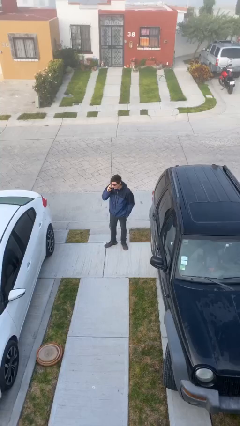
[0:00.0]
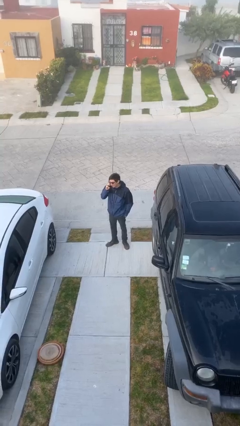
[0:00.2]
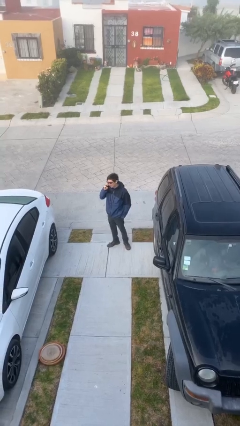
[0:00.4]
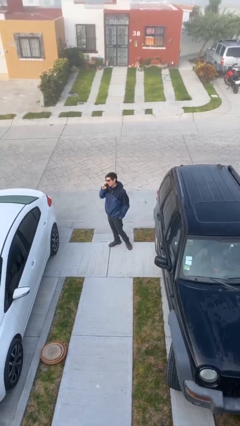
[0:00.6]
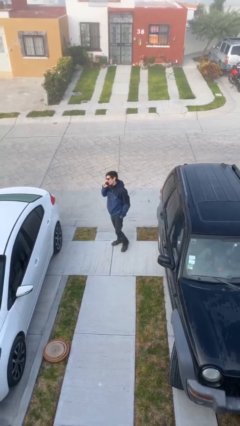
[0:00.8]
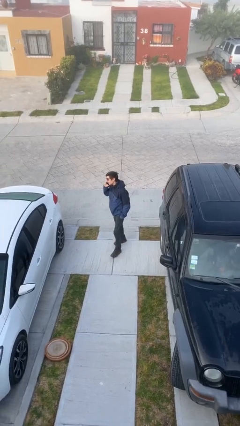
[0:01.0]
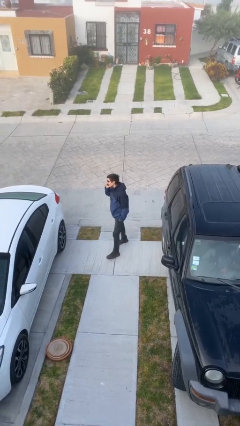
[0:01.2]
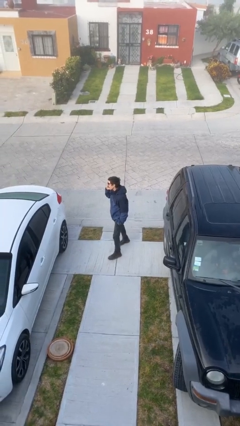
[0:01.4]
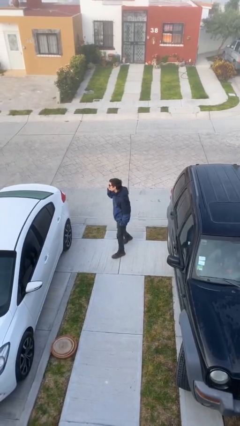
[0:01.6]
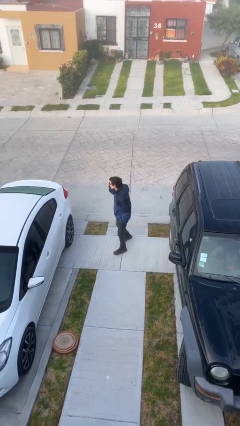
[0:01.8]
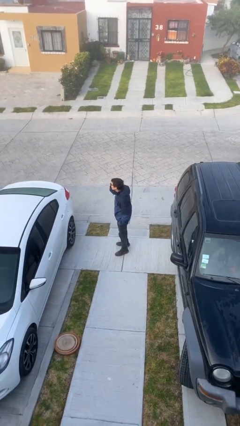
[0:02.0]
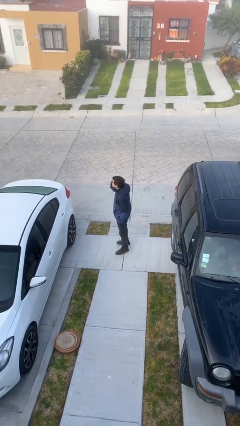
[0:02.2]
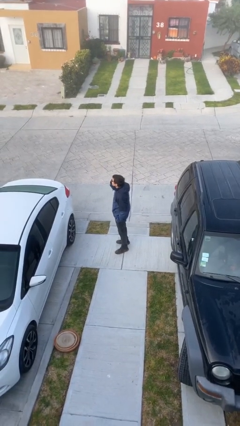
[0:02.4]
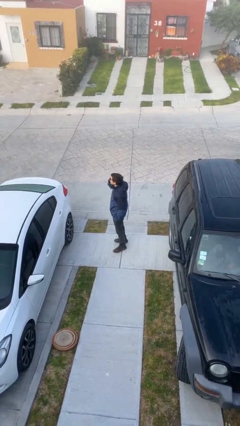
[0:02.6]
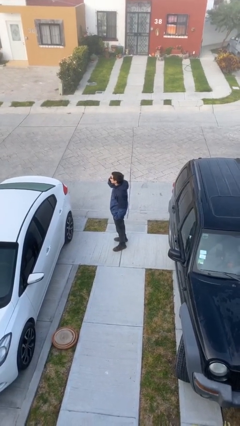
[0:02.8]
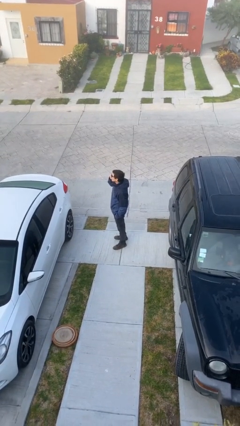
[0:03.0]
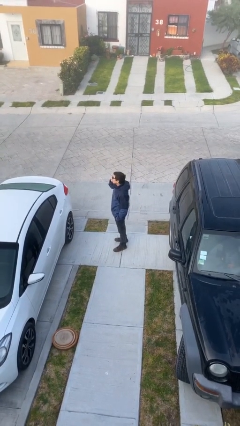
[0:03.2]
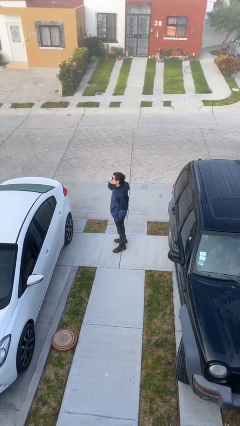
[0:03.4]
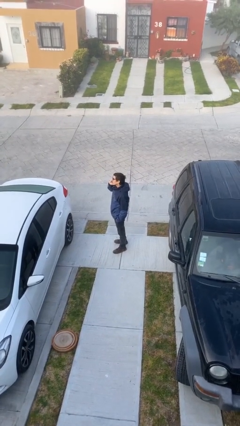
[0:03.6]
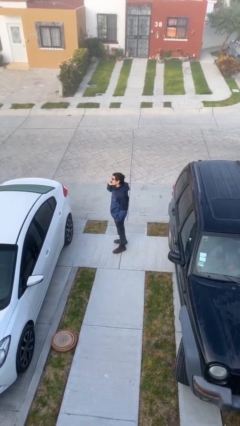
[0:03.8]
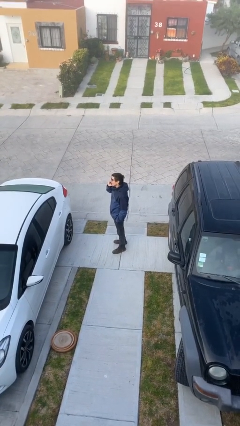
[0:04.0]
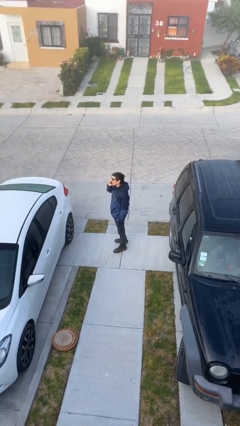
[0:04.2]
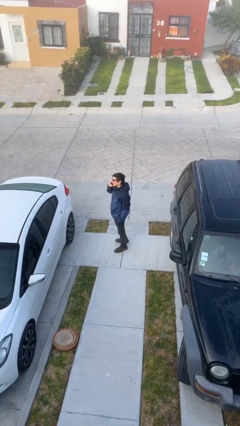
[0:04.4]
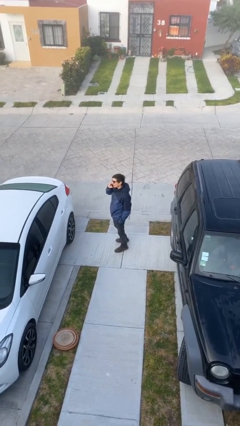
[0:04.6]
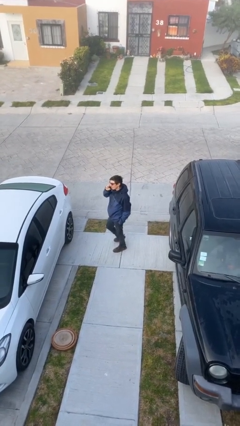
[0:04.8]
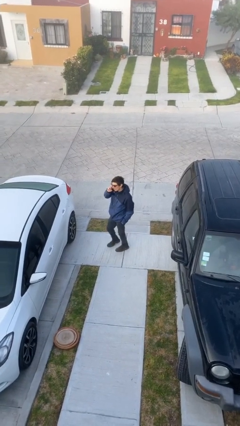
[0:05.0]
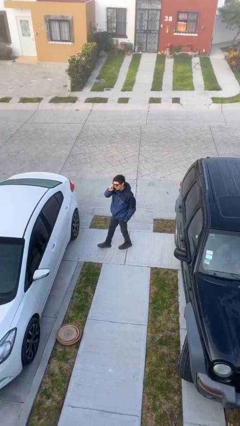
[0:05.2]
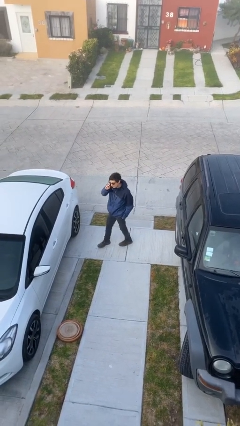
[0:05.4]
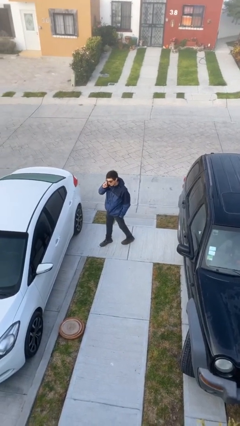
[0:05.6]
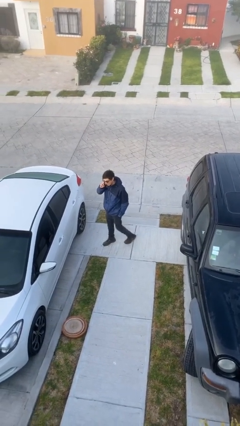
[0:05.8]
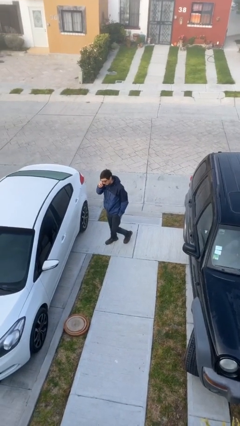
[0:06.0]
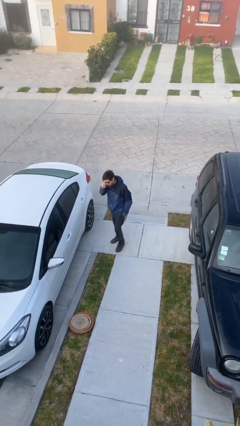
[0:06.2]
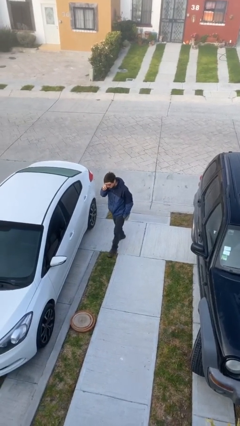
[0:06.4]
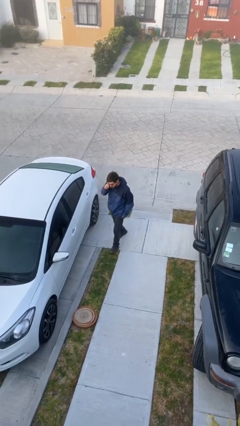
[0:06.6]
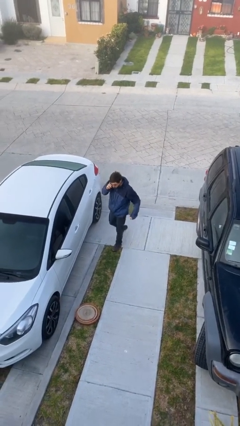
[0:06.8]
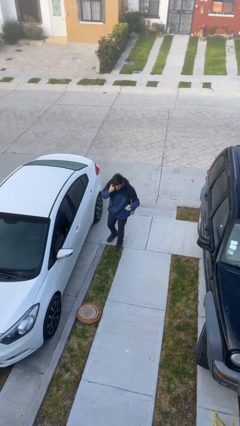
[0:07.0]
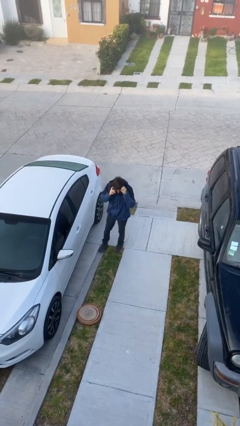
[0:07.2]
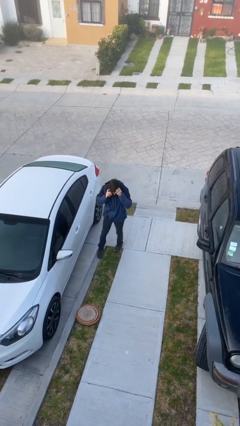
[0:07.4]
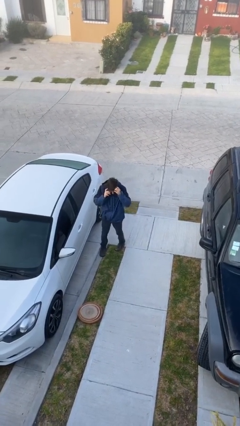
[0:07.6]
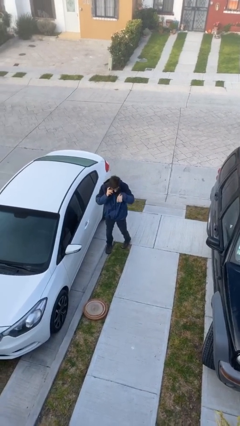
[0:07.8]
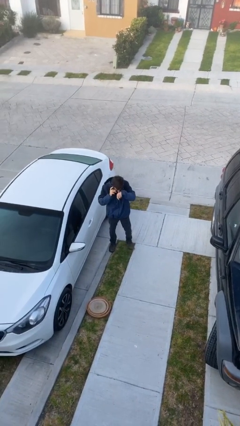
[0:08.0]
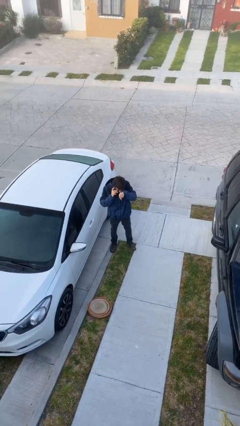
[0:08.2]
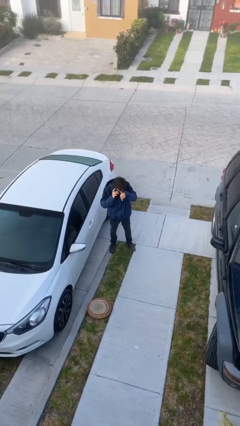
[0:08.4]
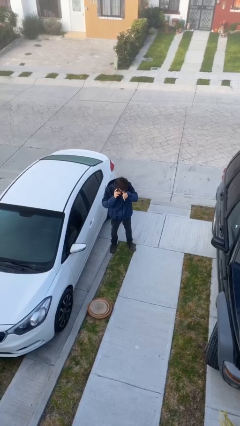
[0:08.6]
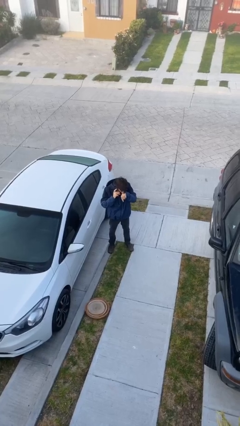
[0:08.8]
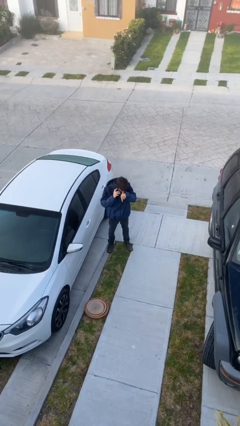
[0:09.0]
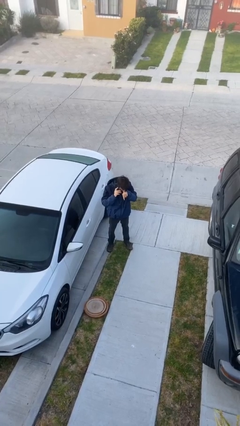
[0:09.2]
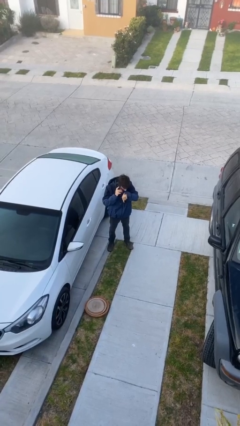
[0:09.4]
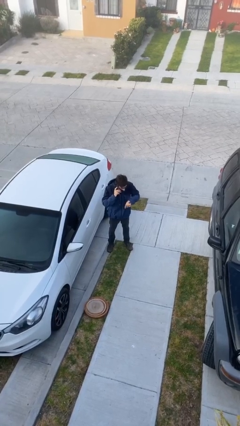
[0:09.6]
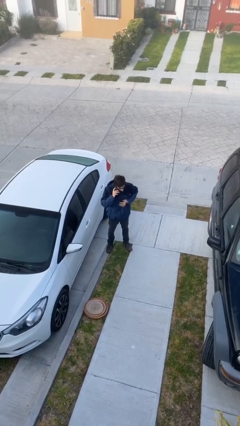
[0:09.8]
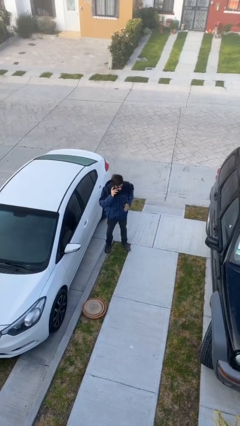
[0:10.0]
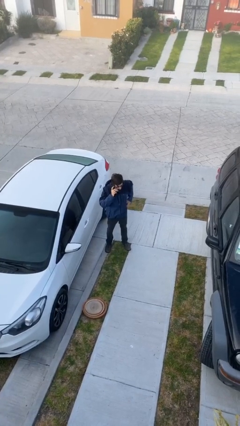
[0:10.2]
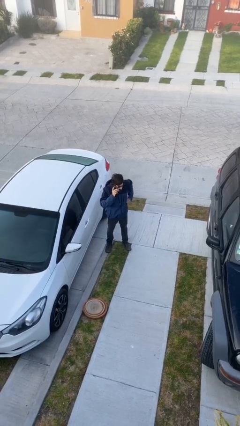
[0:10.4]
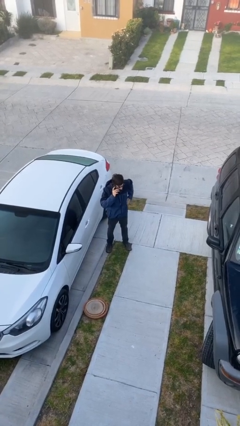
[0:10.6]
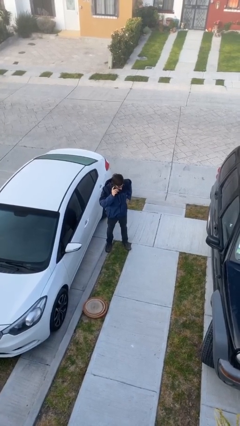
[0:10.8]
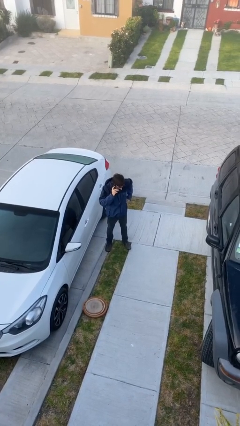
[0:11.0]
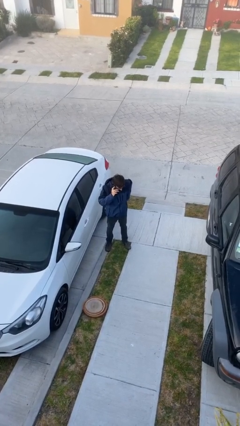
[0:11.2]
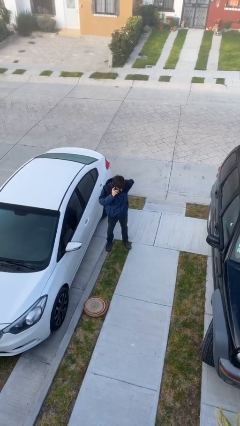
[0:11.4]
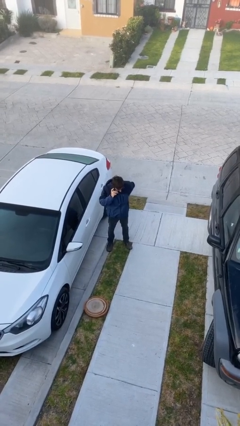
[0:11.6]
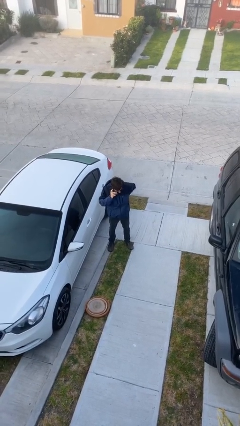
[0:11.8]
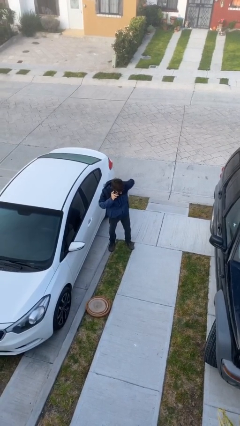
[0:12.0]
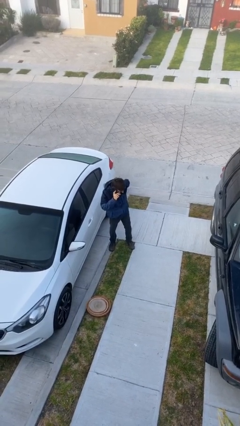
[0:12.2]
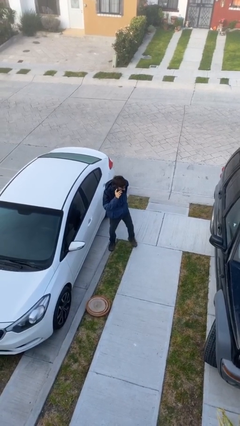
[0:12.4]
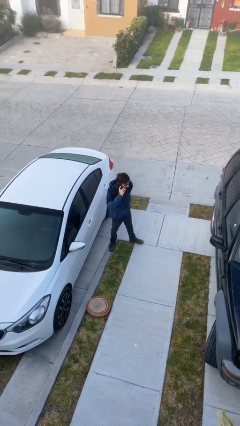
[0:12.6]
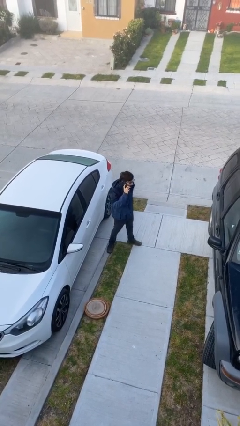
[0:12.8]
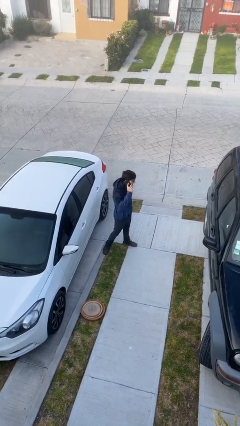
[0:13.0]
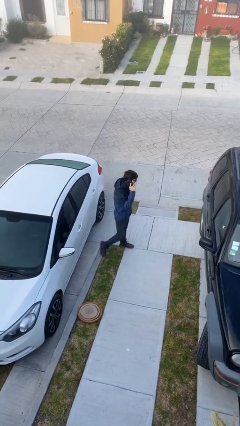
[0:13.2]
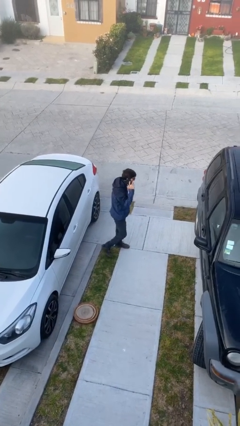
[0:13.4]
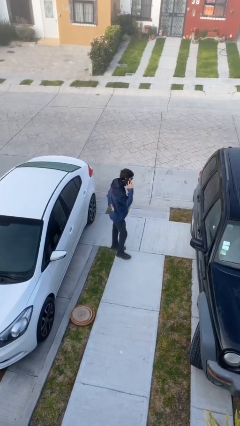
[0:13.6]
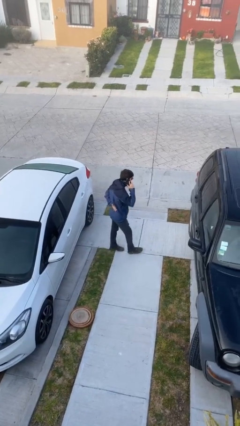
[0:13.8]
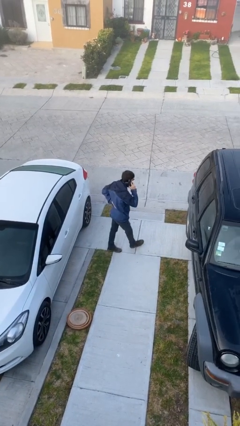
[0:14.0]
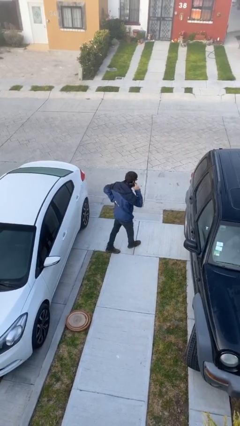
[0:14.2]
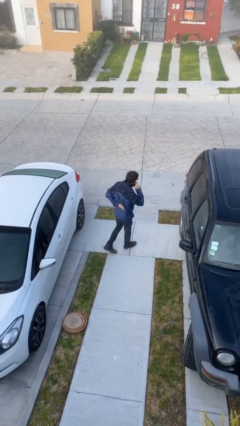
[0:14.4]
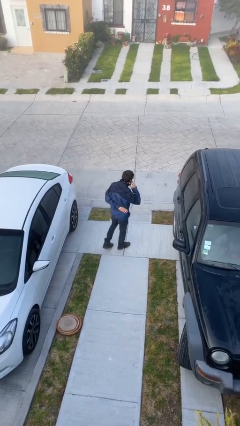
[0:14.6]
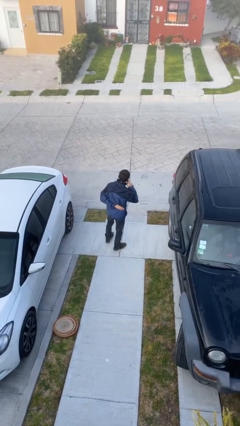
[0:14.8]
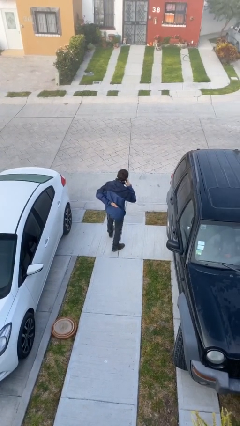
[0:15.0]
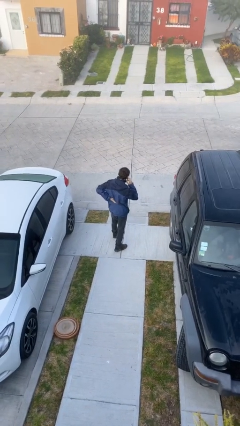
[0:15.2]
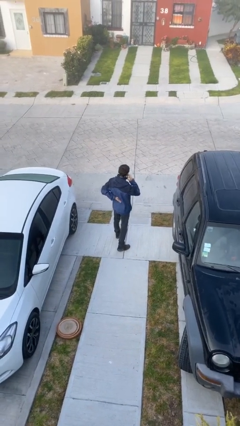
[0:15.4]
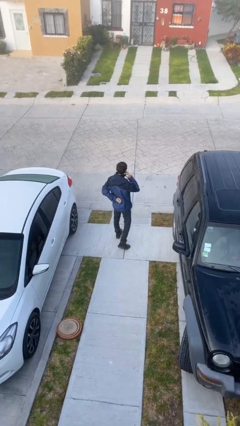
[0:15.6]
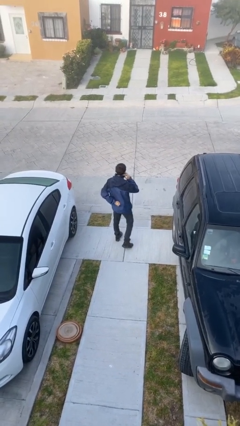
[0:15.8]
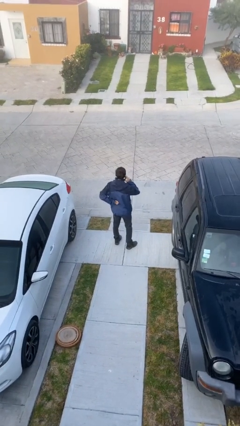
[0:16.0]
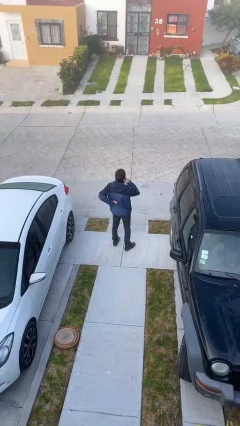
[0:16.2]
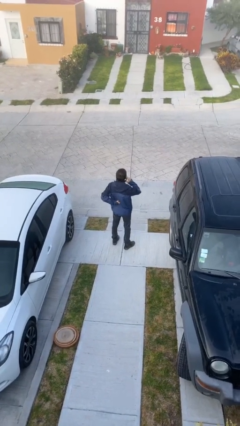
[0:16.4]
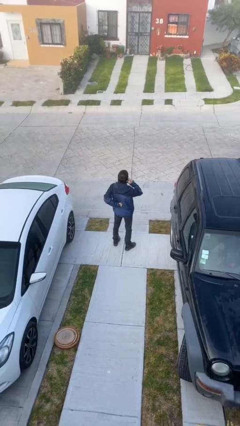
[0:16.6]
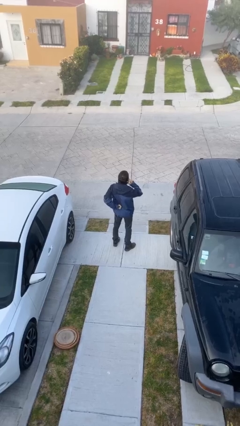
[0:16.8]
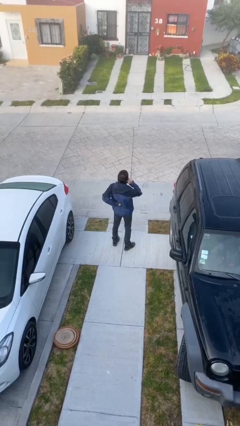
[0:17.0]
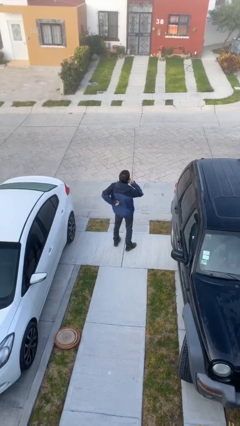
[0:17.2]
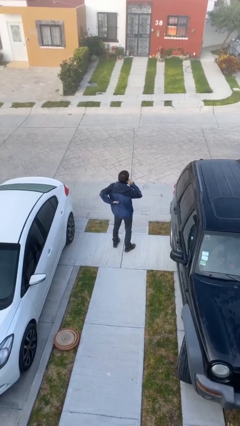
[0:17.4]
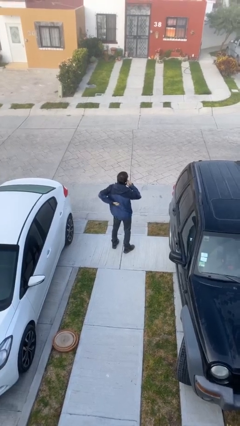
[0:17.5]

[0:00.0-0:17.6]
person talks on phone

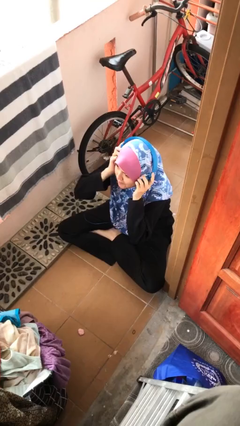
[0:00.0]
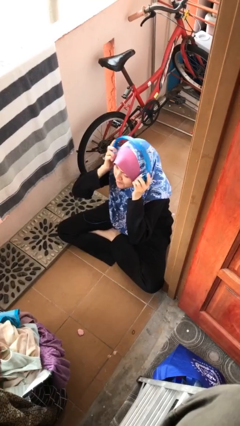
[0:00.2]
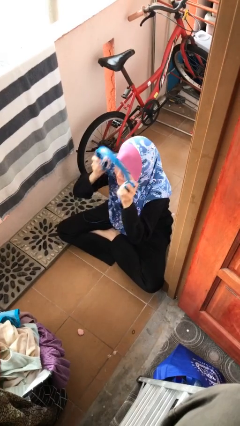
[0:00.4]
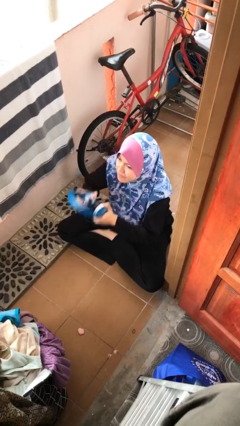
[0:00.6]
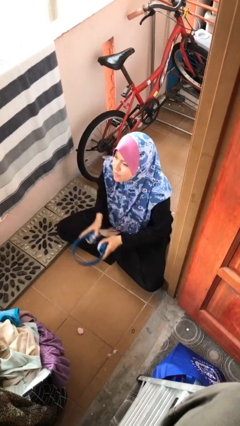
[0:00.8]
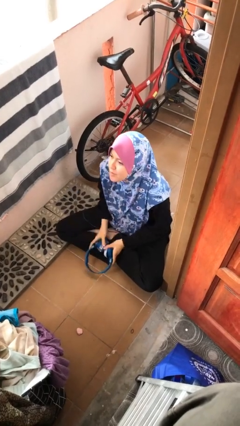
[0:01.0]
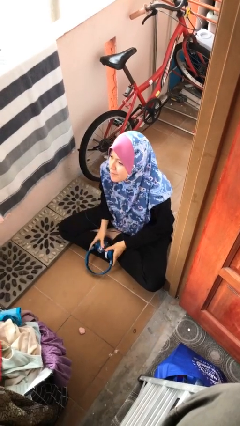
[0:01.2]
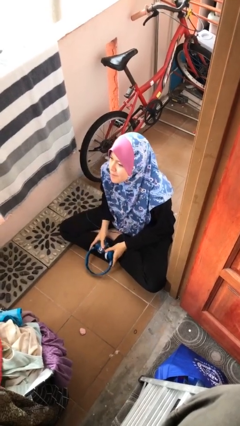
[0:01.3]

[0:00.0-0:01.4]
person takes off headphones
